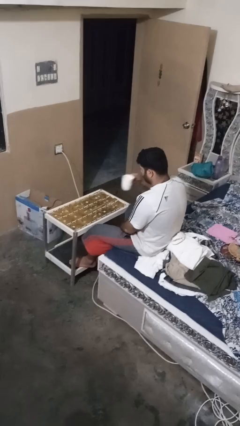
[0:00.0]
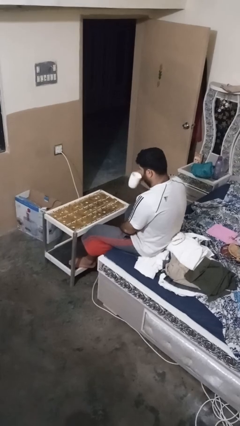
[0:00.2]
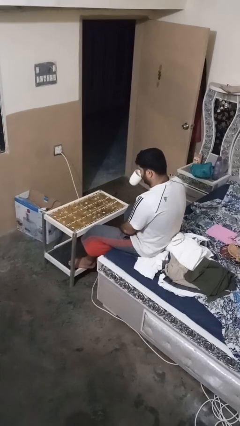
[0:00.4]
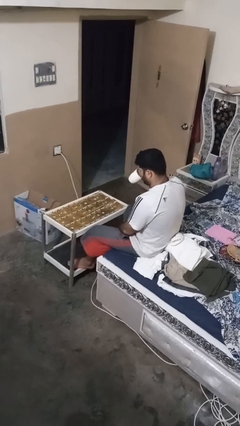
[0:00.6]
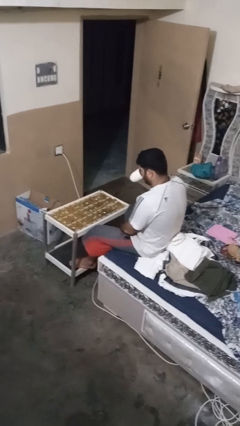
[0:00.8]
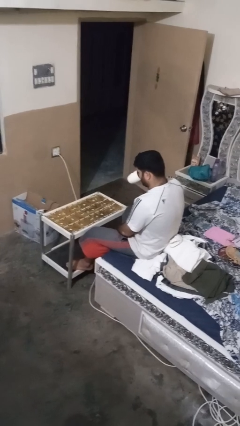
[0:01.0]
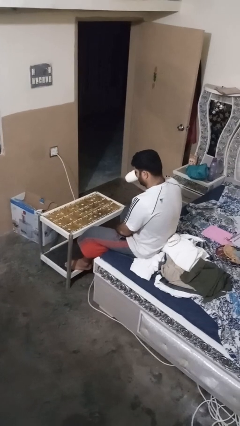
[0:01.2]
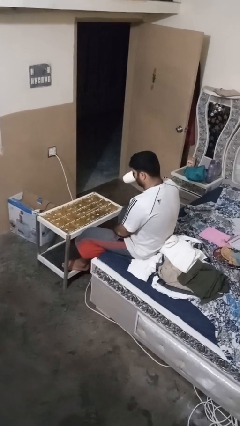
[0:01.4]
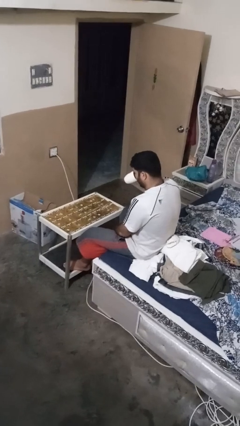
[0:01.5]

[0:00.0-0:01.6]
person drinks from mug

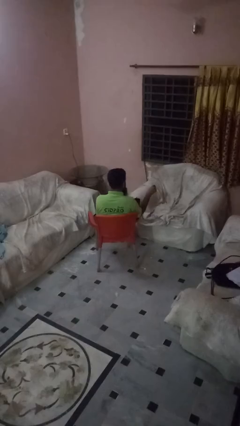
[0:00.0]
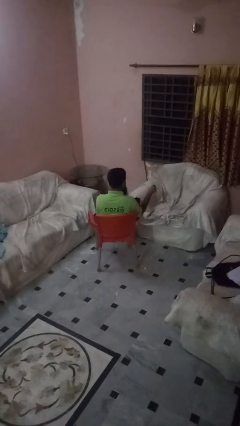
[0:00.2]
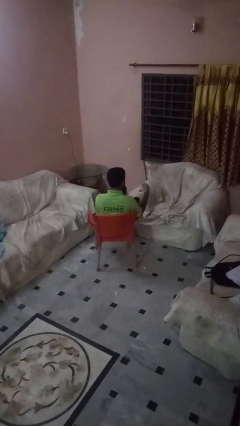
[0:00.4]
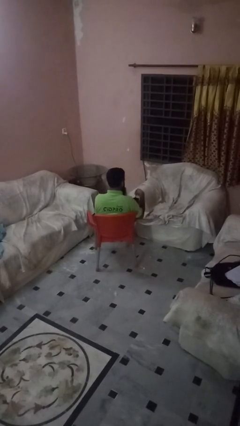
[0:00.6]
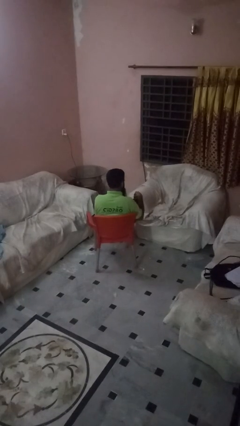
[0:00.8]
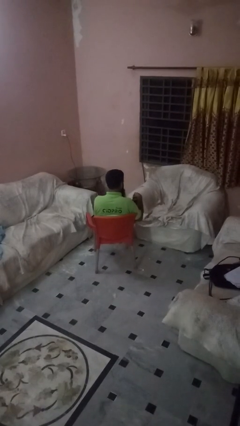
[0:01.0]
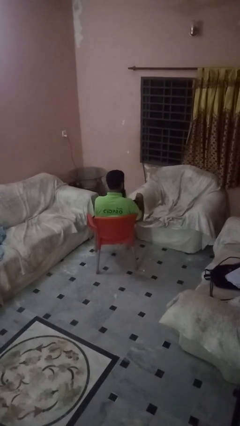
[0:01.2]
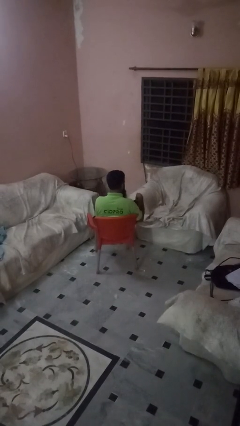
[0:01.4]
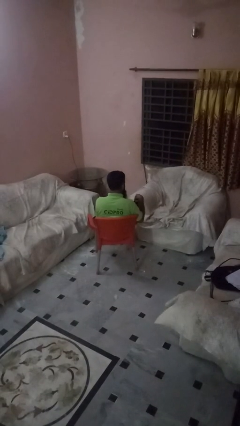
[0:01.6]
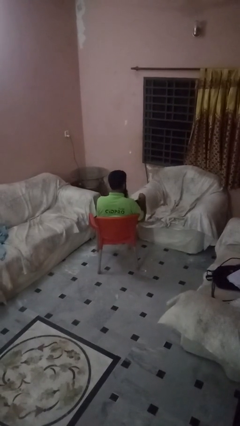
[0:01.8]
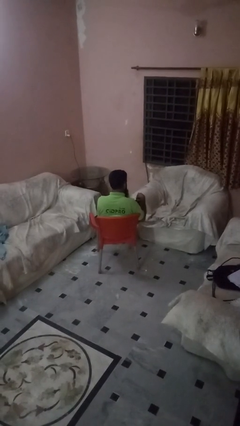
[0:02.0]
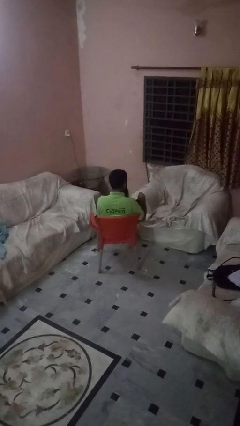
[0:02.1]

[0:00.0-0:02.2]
person stirs mug

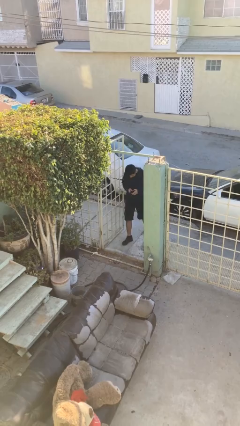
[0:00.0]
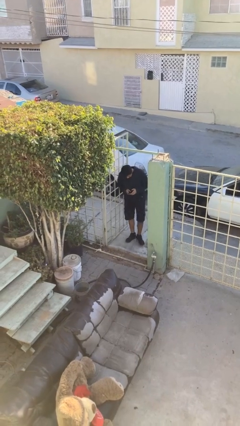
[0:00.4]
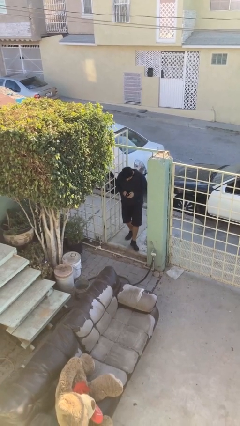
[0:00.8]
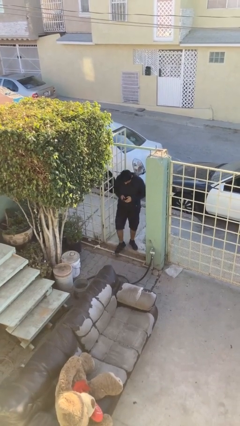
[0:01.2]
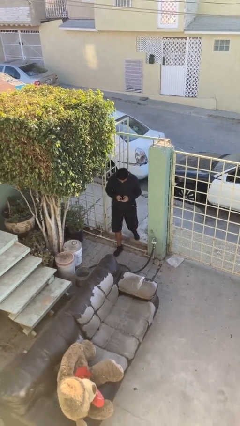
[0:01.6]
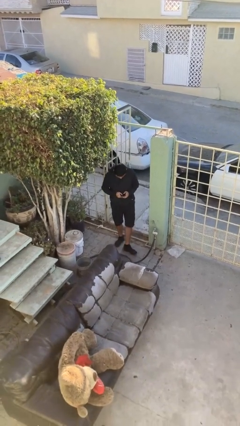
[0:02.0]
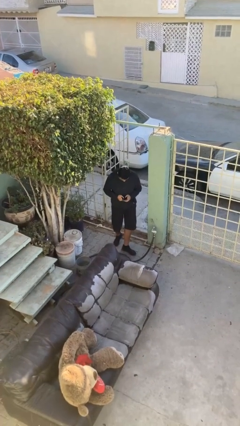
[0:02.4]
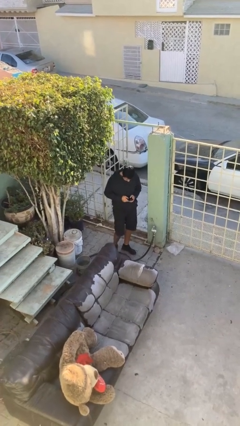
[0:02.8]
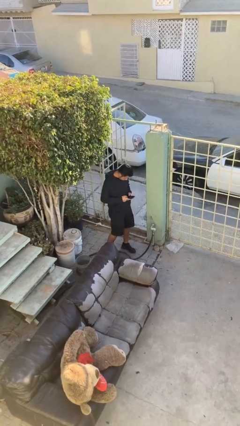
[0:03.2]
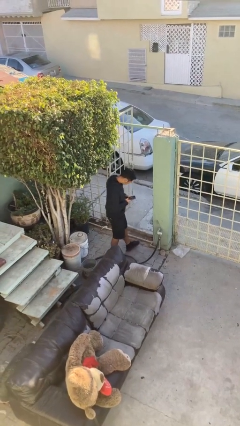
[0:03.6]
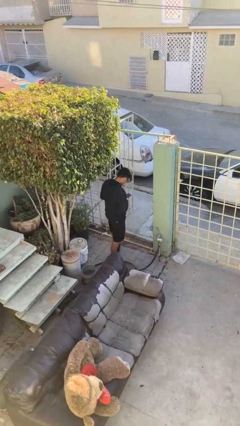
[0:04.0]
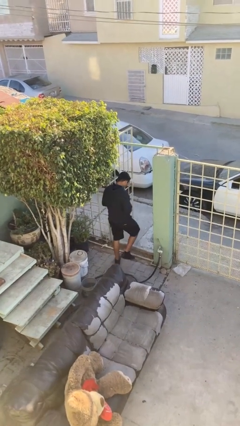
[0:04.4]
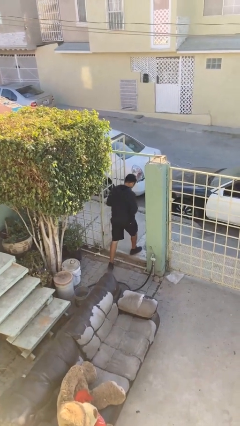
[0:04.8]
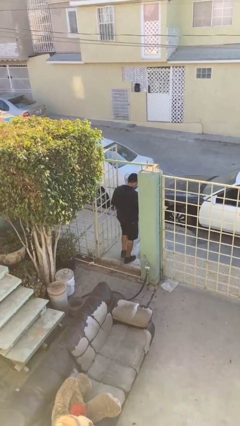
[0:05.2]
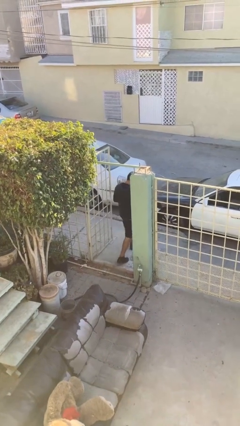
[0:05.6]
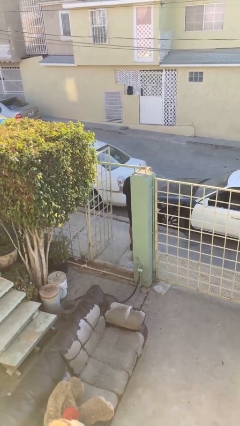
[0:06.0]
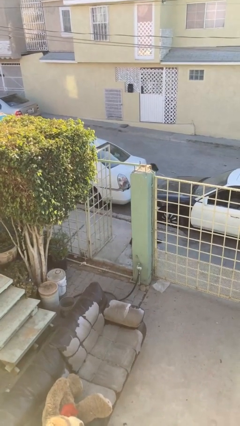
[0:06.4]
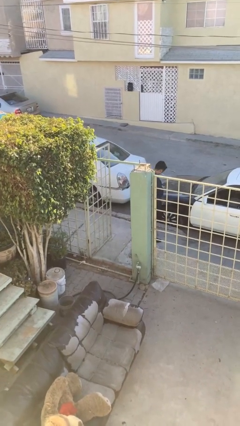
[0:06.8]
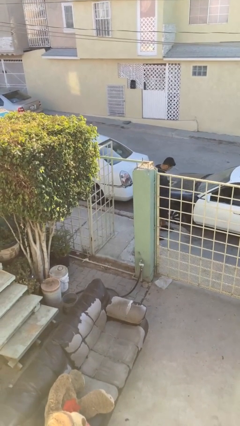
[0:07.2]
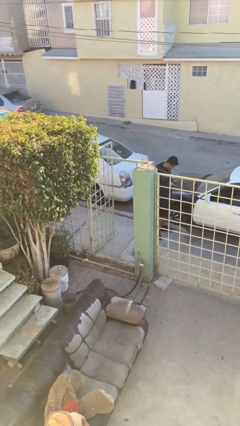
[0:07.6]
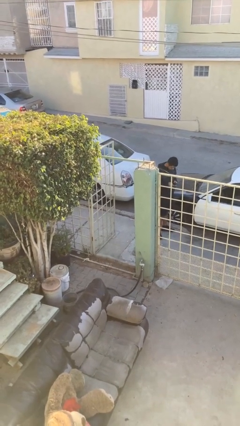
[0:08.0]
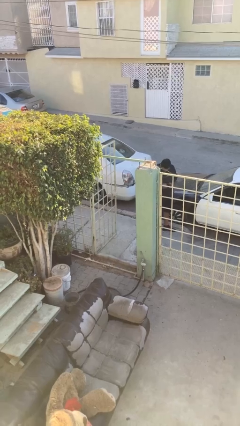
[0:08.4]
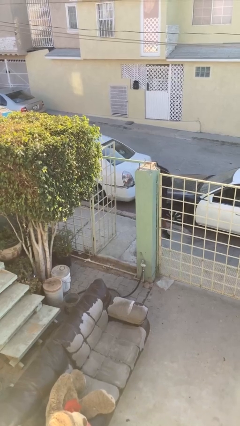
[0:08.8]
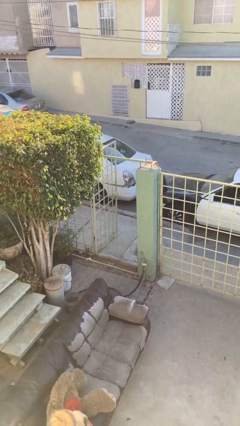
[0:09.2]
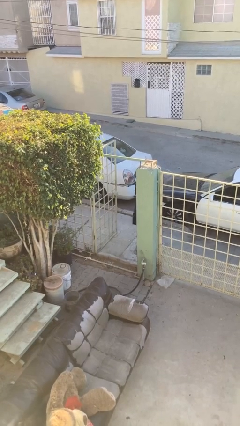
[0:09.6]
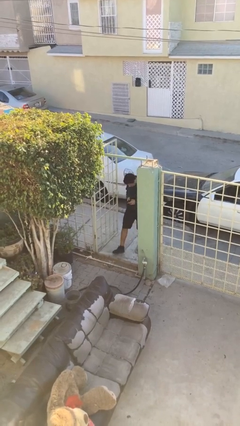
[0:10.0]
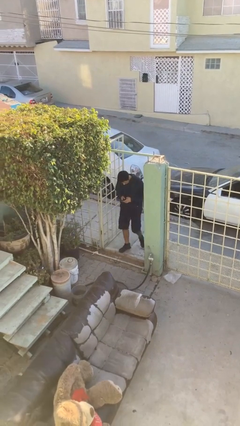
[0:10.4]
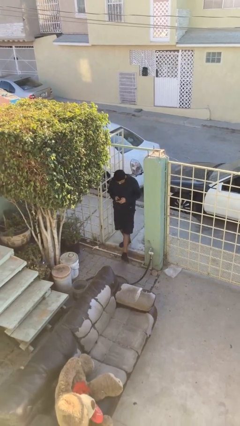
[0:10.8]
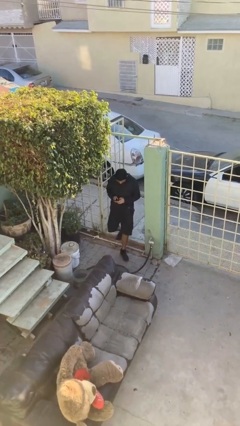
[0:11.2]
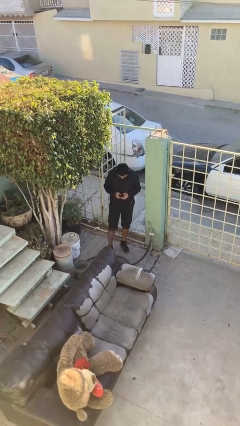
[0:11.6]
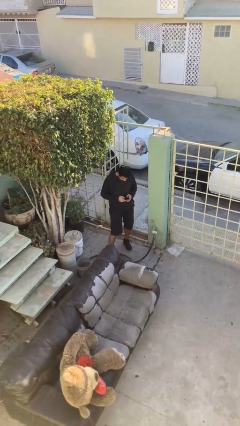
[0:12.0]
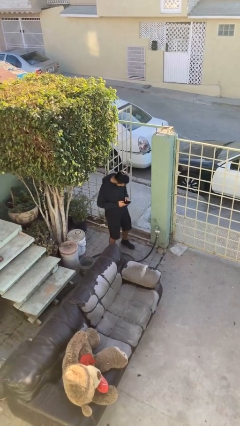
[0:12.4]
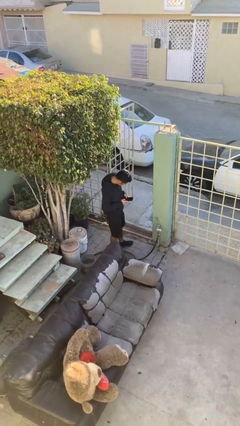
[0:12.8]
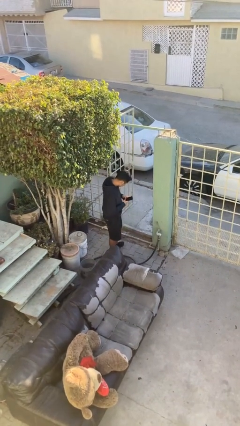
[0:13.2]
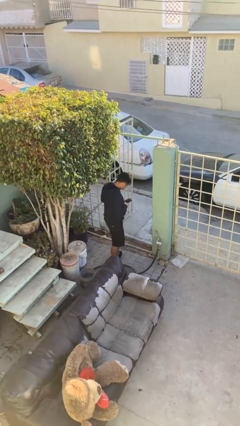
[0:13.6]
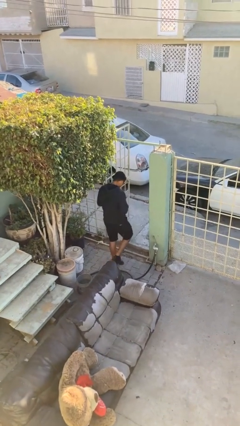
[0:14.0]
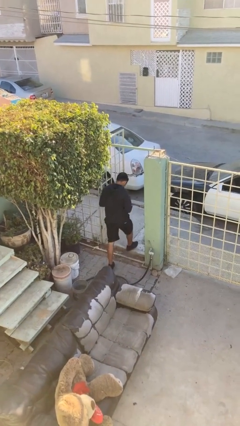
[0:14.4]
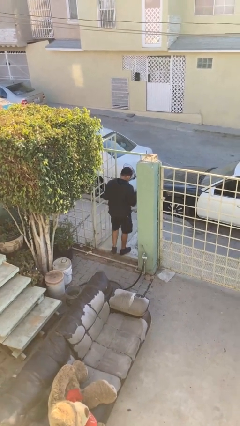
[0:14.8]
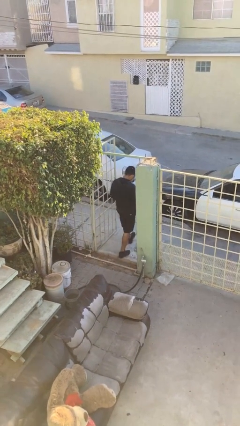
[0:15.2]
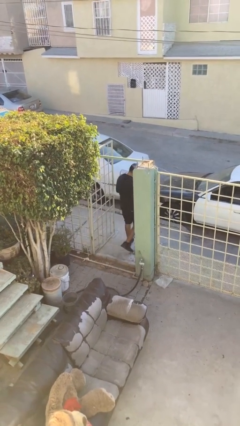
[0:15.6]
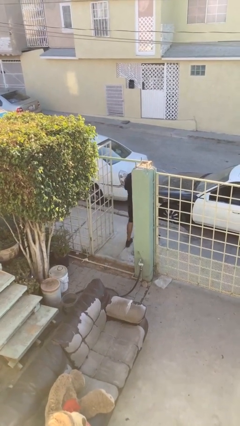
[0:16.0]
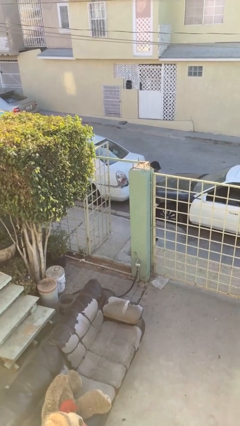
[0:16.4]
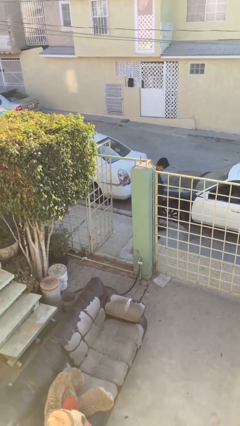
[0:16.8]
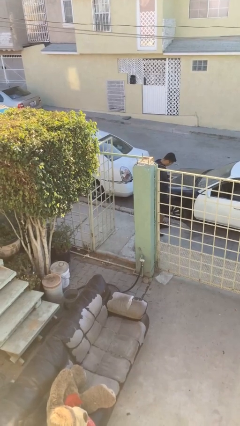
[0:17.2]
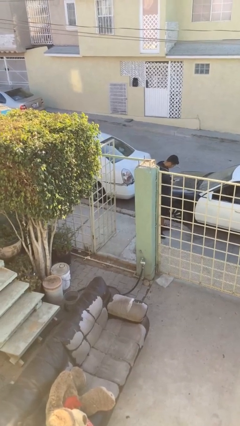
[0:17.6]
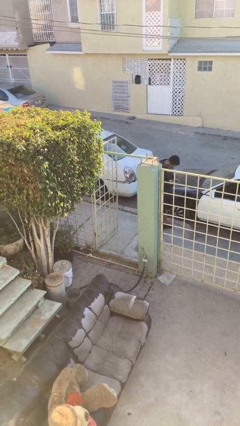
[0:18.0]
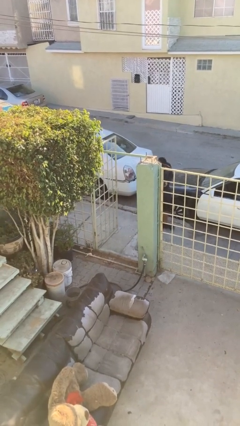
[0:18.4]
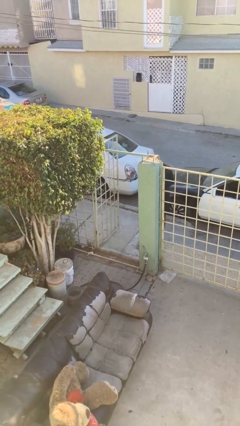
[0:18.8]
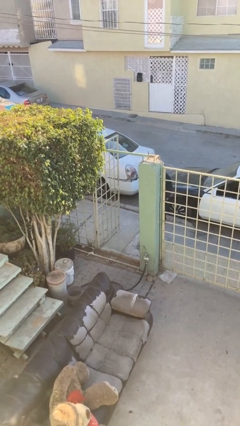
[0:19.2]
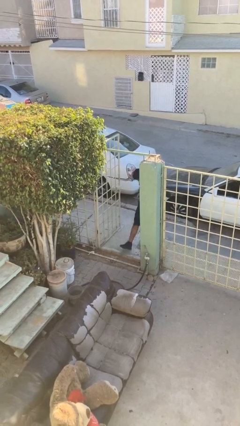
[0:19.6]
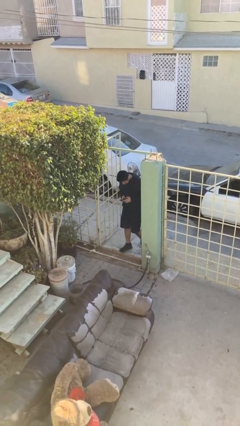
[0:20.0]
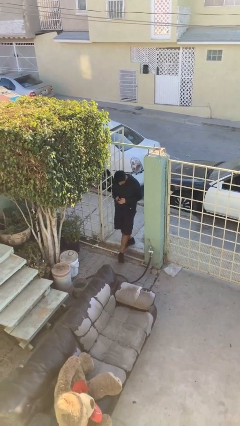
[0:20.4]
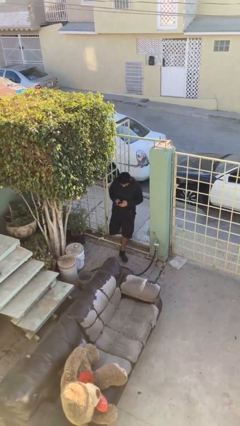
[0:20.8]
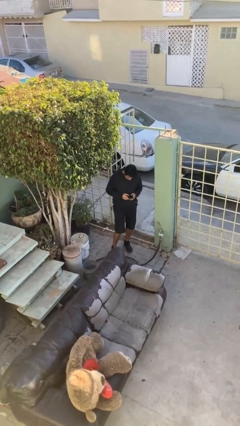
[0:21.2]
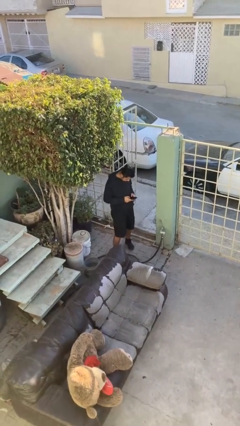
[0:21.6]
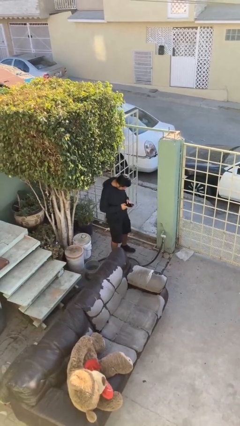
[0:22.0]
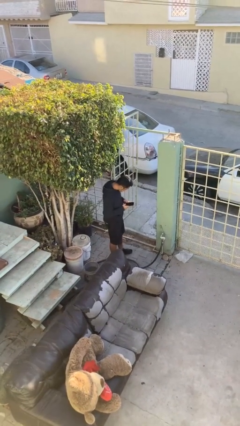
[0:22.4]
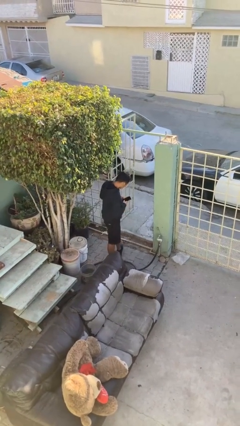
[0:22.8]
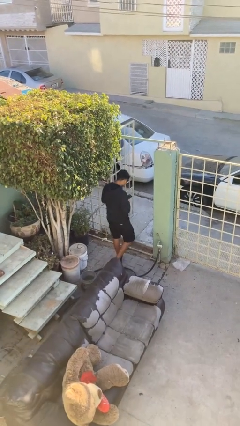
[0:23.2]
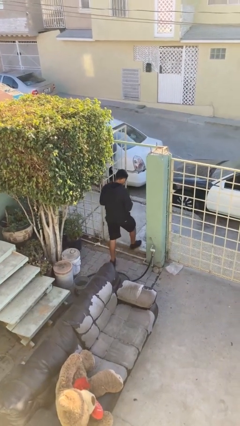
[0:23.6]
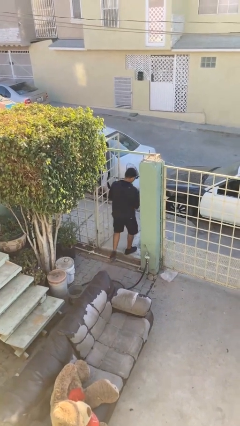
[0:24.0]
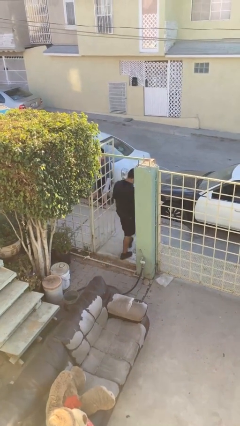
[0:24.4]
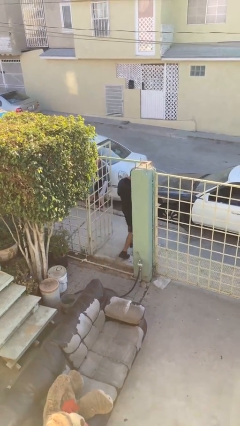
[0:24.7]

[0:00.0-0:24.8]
person texts on phone

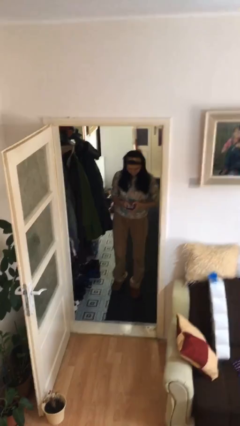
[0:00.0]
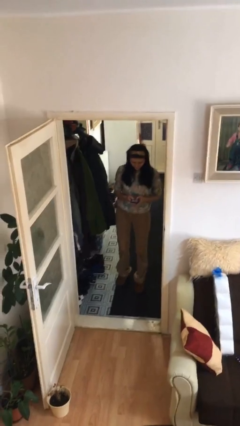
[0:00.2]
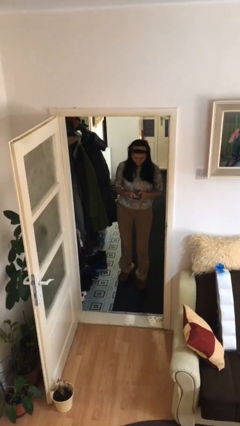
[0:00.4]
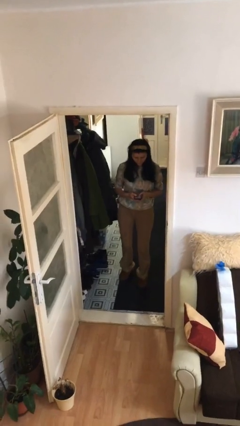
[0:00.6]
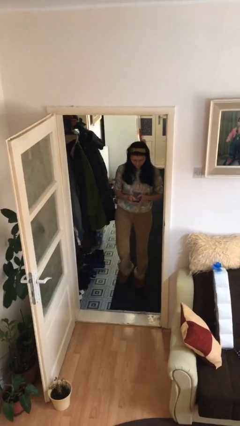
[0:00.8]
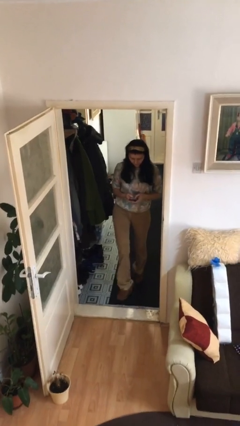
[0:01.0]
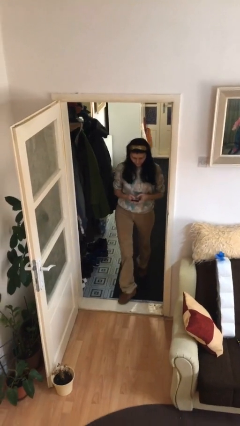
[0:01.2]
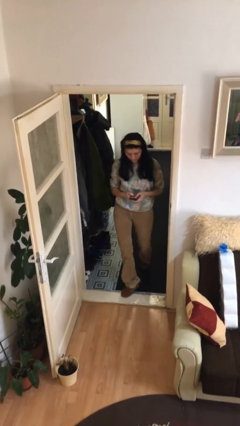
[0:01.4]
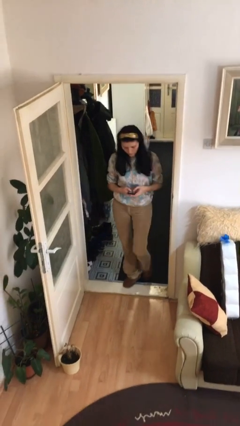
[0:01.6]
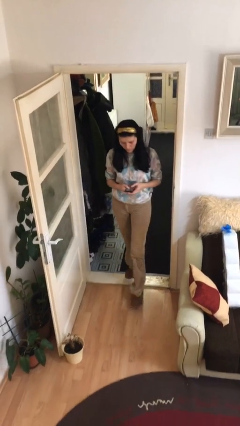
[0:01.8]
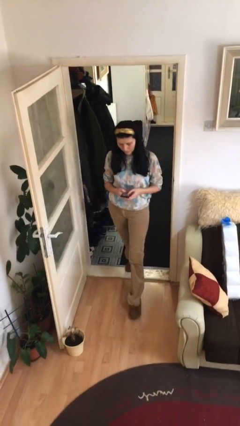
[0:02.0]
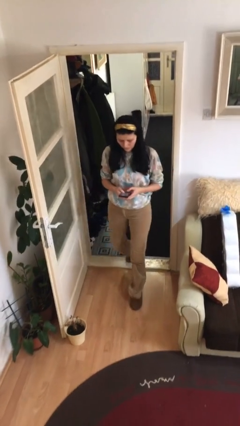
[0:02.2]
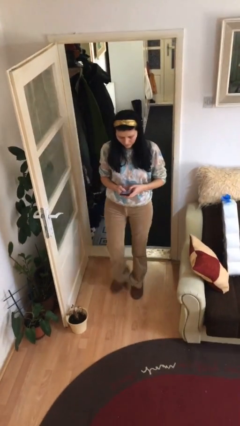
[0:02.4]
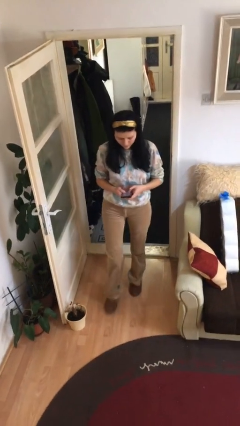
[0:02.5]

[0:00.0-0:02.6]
person enters scene through structure
